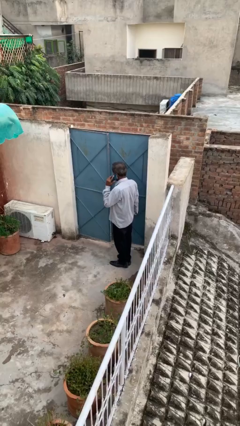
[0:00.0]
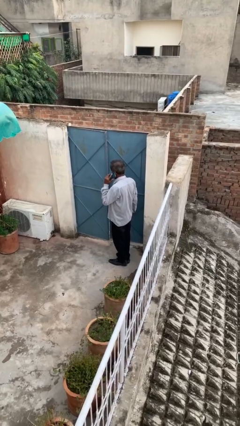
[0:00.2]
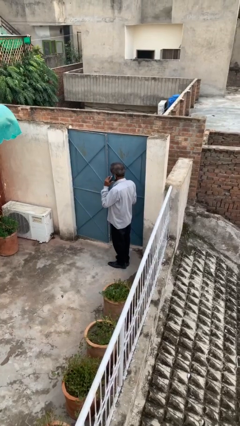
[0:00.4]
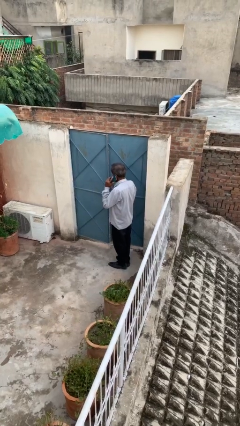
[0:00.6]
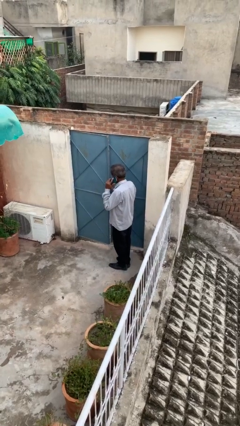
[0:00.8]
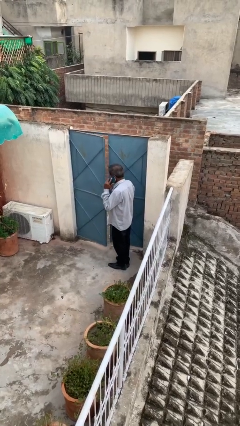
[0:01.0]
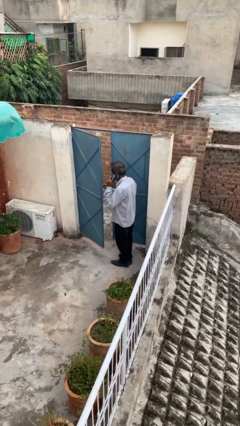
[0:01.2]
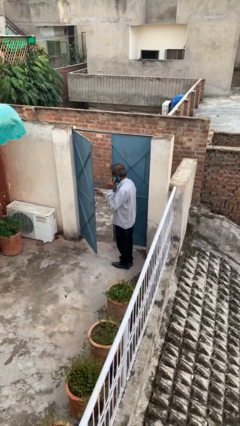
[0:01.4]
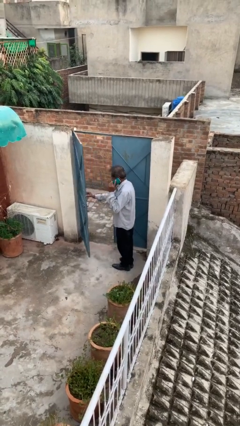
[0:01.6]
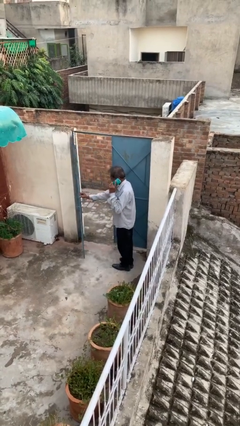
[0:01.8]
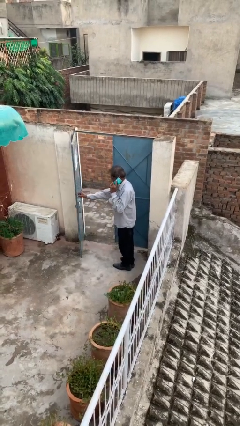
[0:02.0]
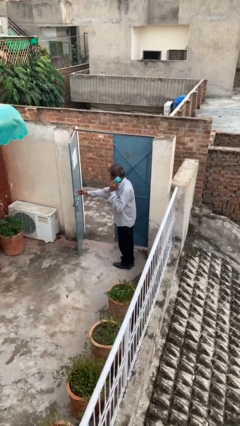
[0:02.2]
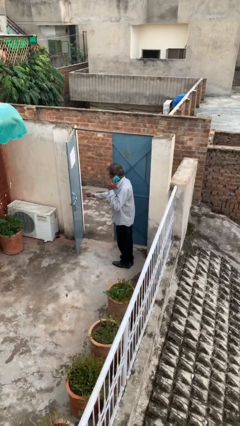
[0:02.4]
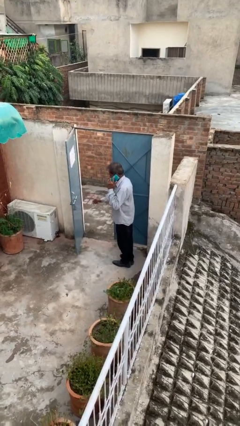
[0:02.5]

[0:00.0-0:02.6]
person opens facility door

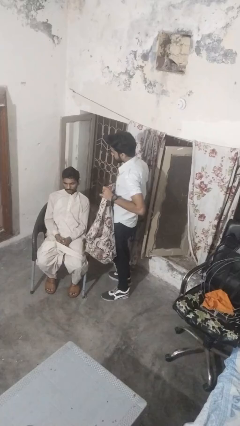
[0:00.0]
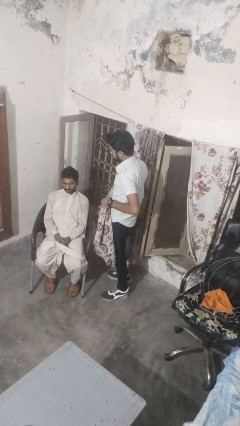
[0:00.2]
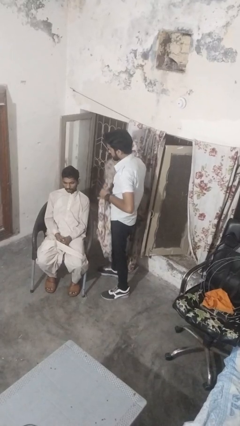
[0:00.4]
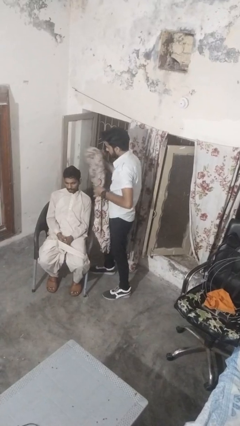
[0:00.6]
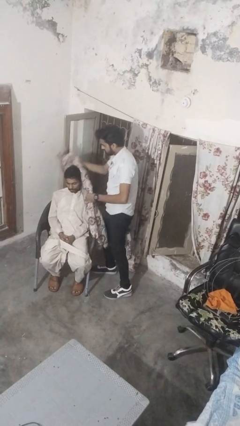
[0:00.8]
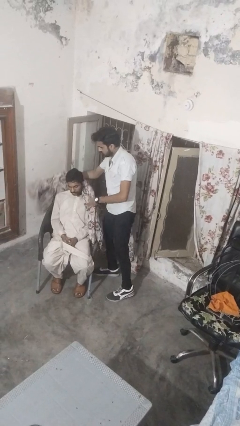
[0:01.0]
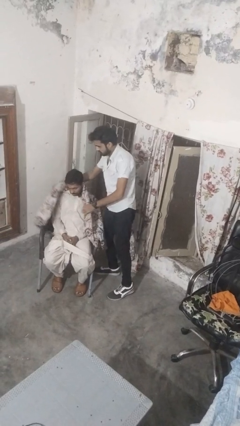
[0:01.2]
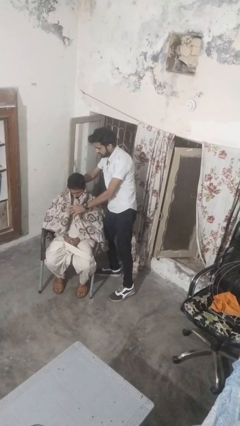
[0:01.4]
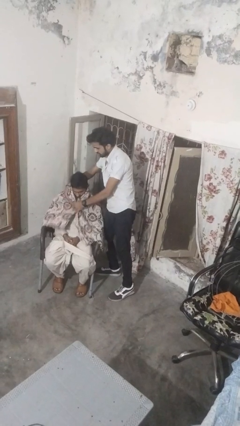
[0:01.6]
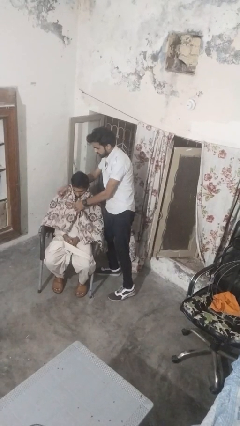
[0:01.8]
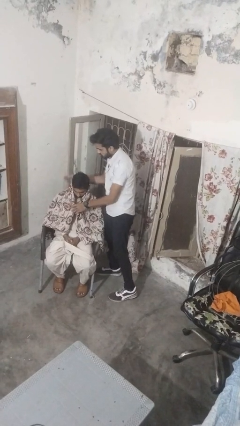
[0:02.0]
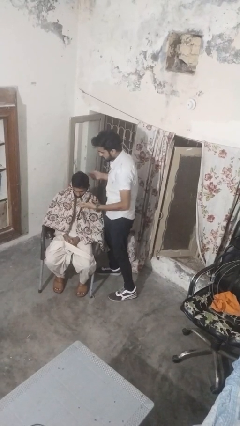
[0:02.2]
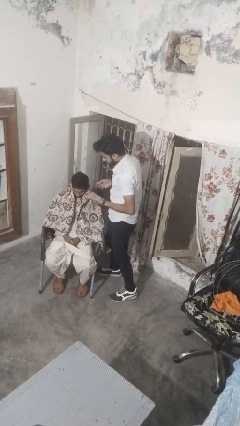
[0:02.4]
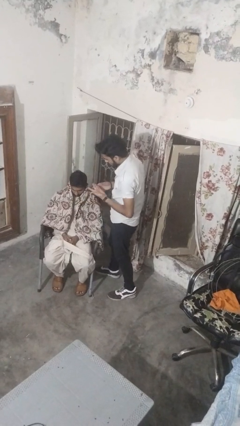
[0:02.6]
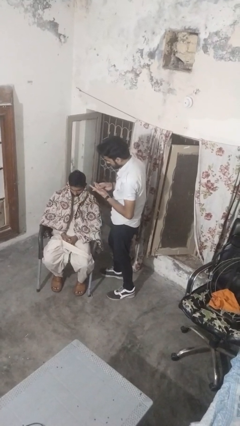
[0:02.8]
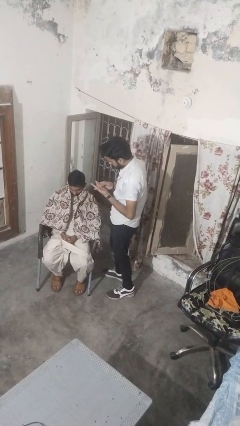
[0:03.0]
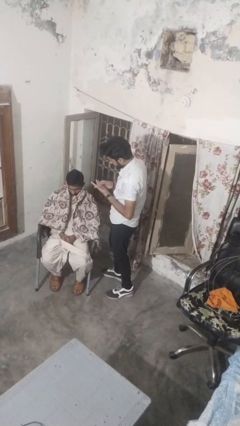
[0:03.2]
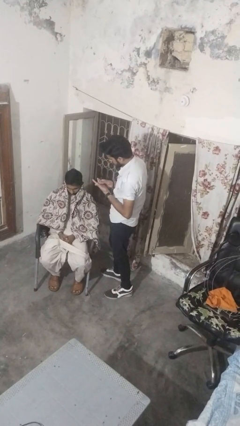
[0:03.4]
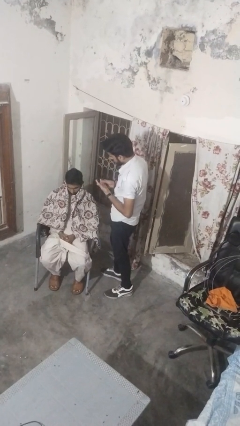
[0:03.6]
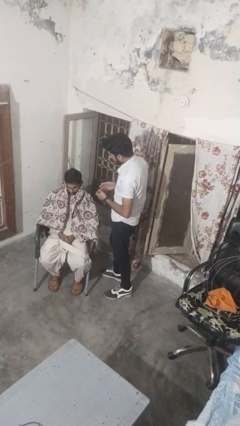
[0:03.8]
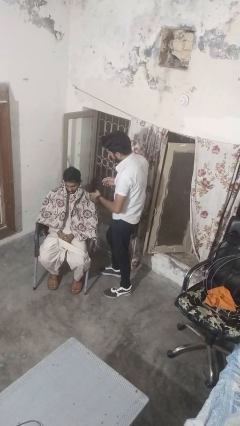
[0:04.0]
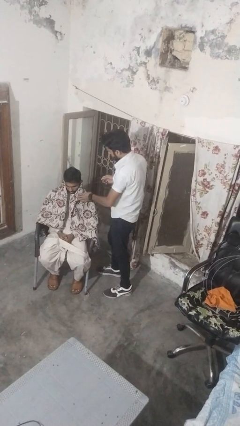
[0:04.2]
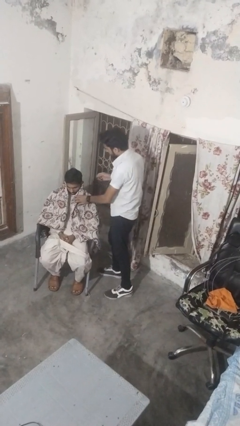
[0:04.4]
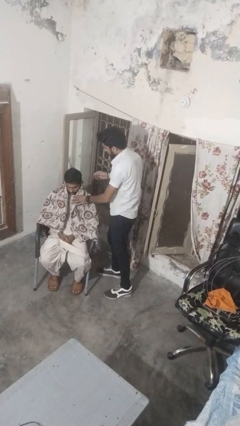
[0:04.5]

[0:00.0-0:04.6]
person covers friend with blanket

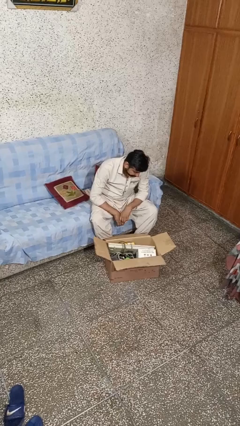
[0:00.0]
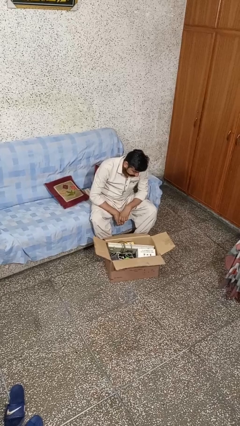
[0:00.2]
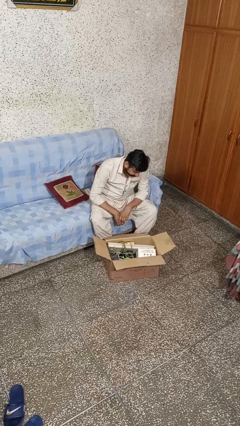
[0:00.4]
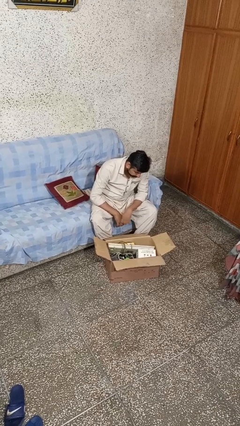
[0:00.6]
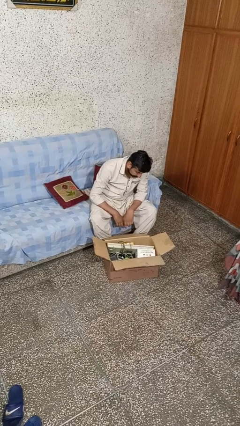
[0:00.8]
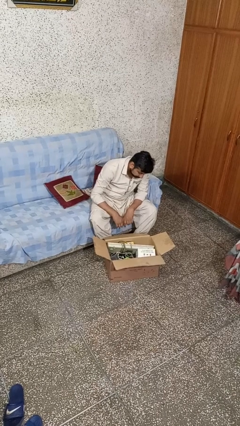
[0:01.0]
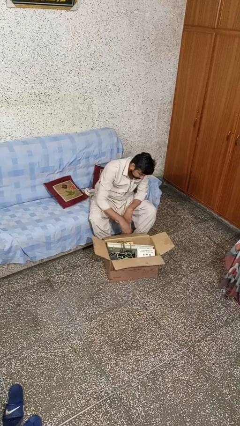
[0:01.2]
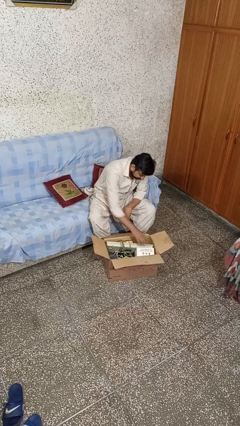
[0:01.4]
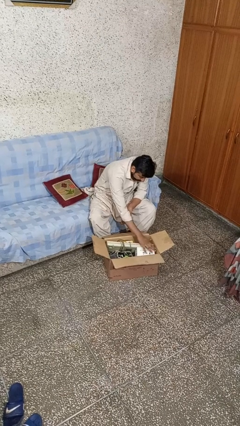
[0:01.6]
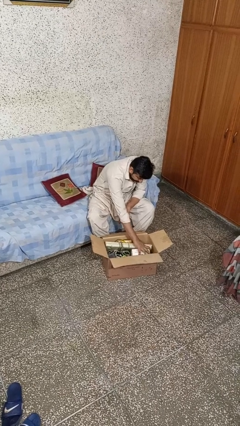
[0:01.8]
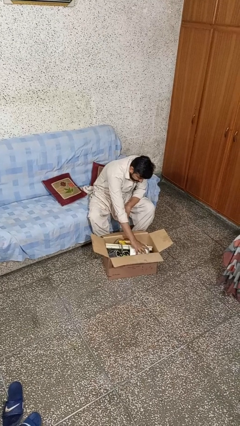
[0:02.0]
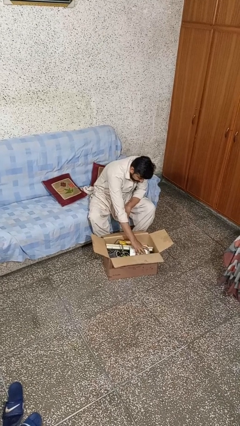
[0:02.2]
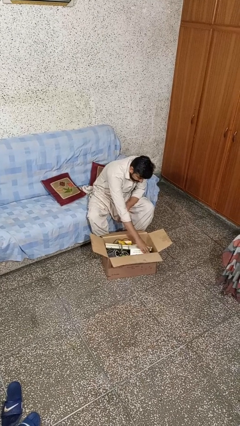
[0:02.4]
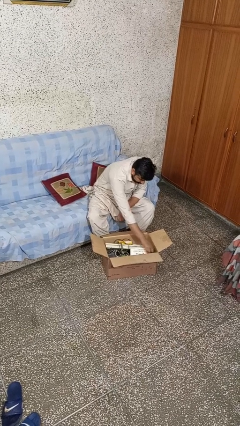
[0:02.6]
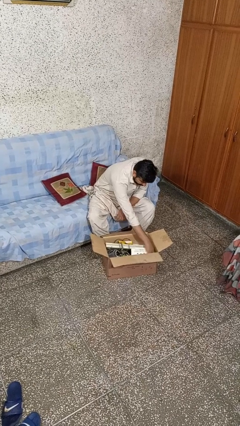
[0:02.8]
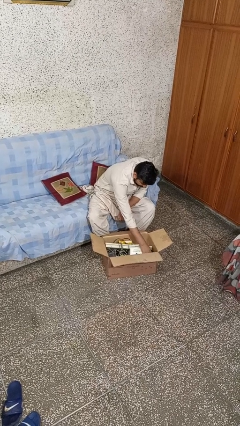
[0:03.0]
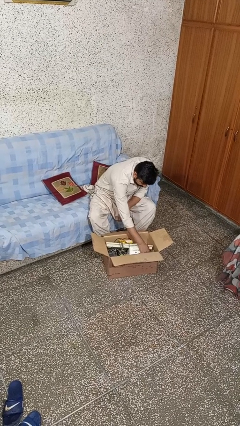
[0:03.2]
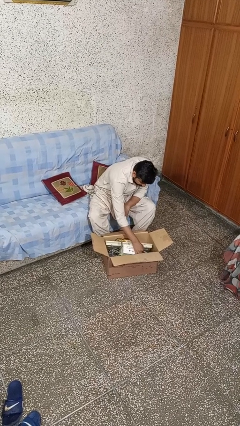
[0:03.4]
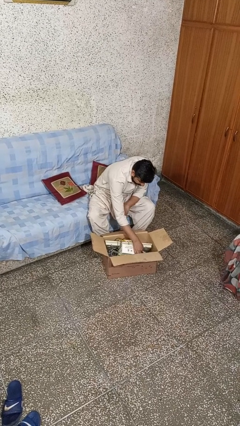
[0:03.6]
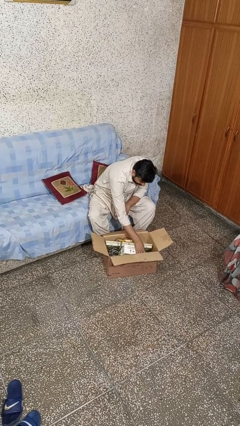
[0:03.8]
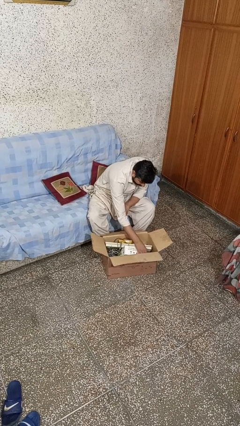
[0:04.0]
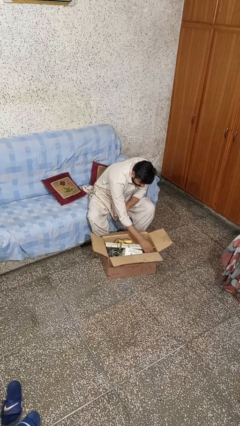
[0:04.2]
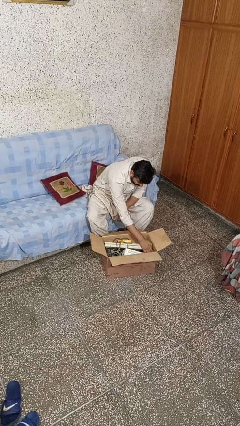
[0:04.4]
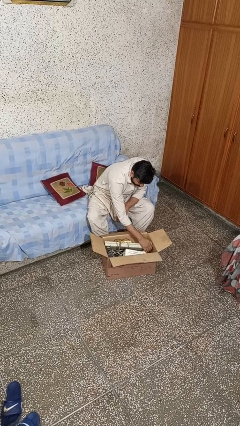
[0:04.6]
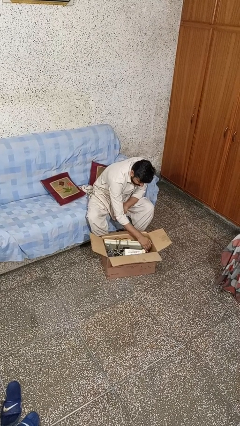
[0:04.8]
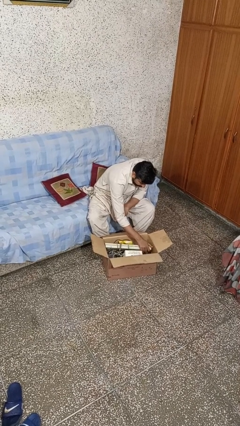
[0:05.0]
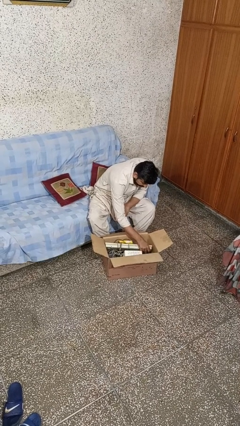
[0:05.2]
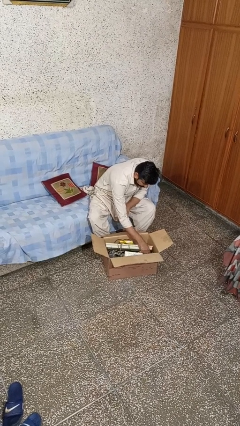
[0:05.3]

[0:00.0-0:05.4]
person searches in box

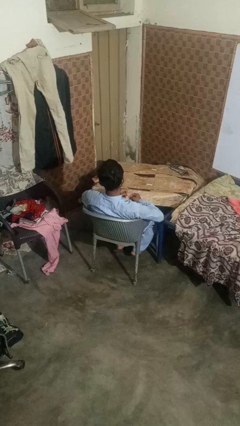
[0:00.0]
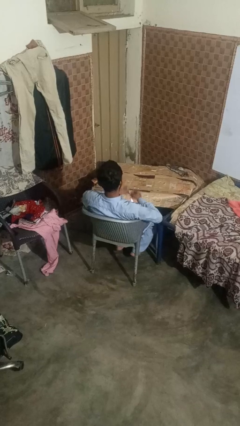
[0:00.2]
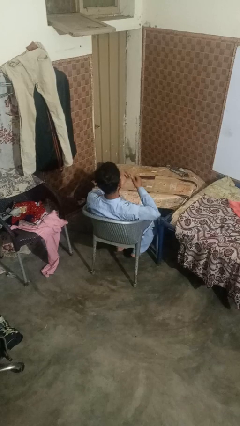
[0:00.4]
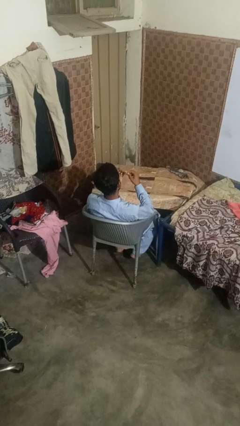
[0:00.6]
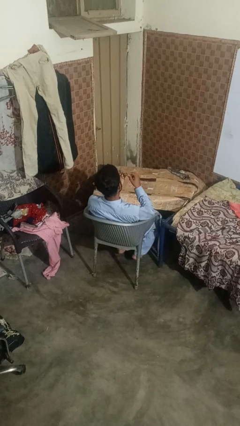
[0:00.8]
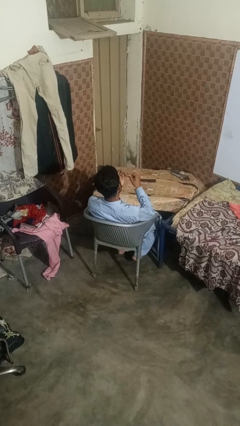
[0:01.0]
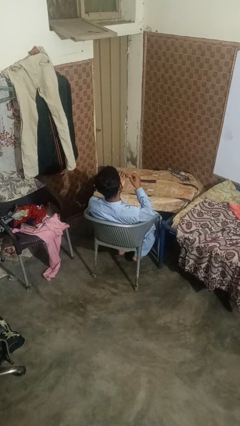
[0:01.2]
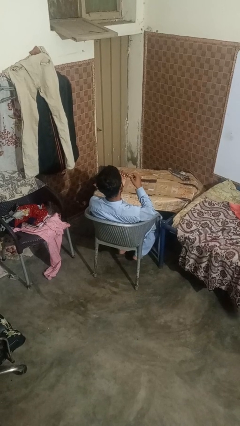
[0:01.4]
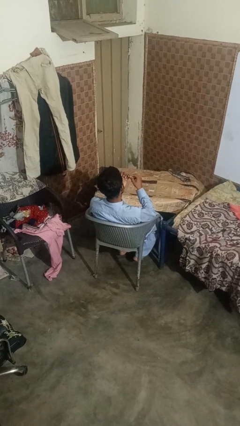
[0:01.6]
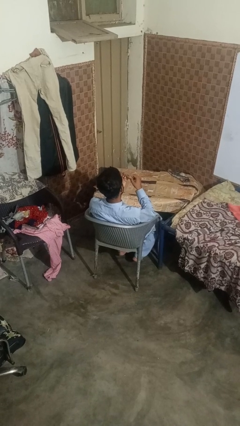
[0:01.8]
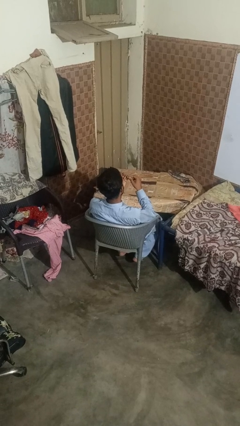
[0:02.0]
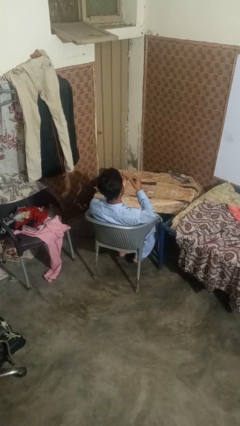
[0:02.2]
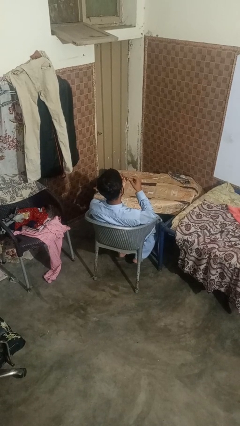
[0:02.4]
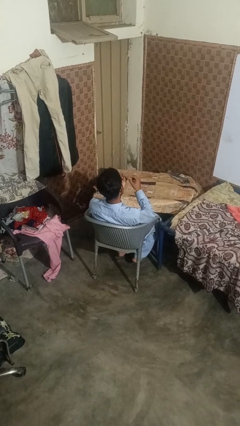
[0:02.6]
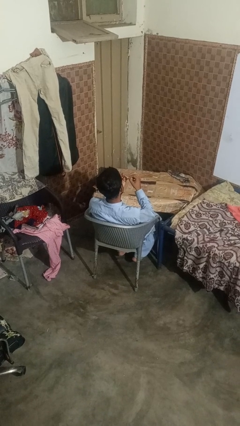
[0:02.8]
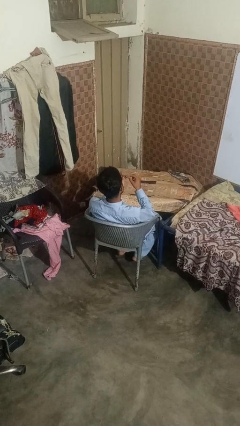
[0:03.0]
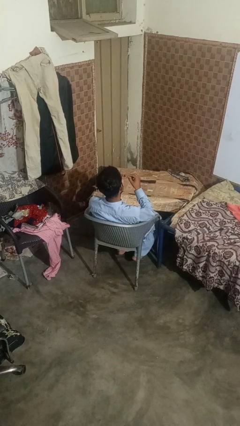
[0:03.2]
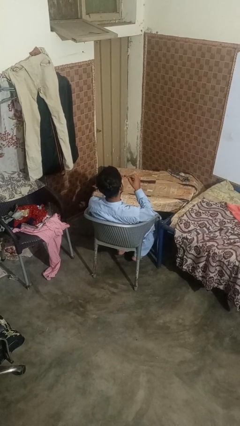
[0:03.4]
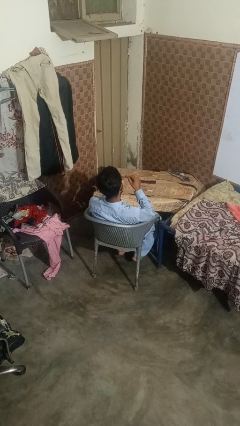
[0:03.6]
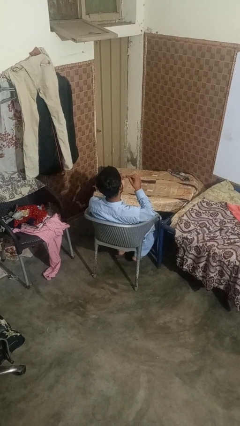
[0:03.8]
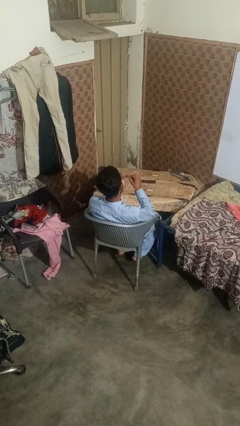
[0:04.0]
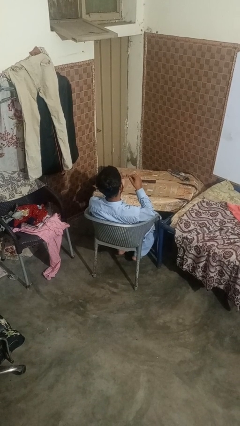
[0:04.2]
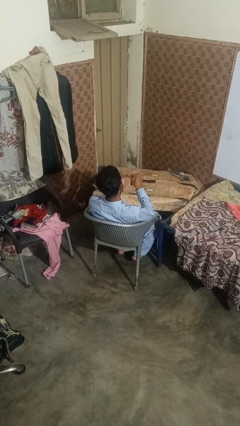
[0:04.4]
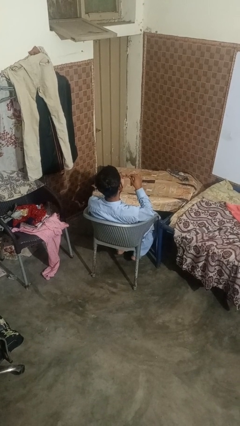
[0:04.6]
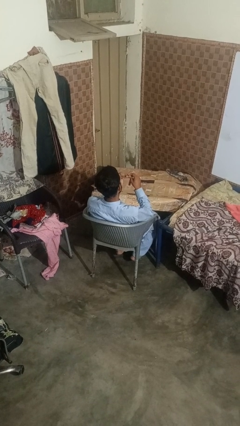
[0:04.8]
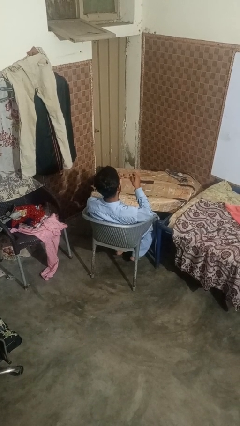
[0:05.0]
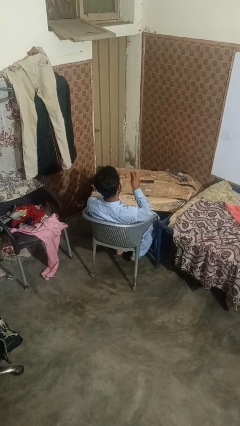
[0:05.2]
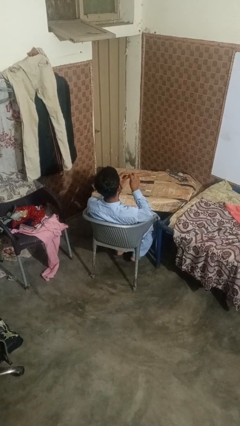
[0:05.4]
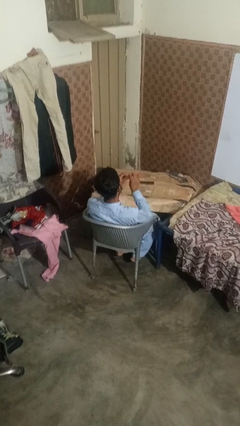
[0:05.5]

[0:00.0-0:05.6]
person files fingernails
